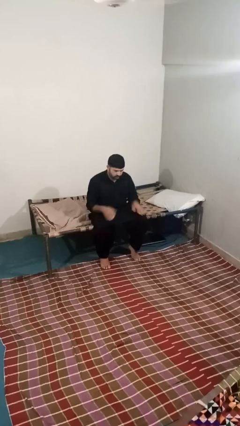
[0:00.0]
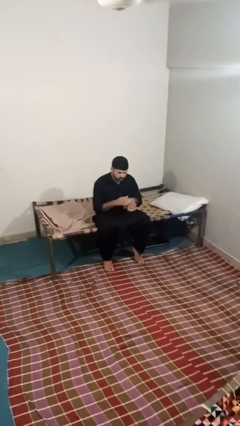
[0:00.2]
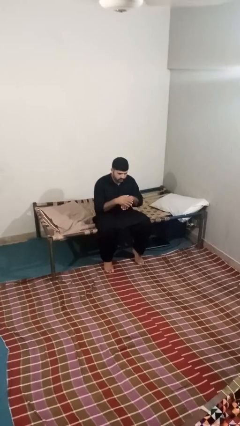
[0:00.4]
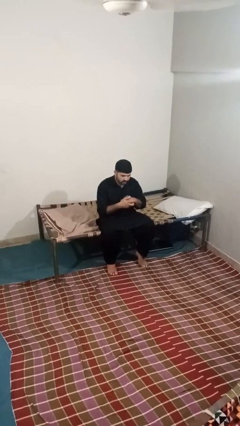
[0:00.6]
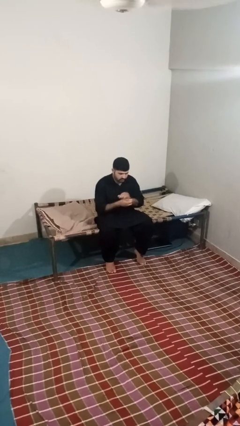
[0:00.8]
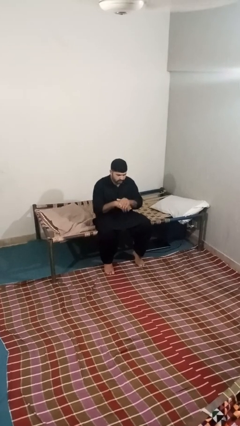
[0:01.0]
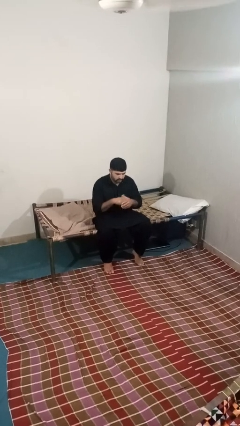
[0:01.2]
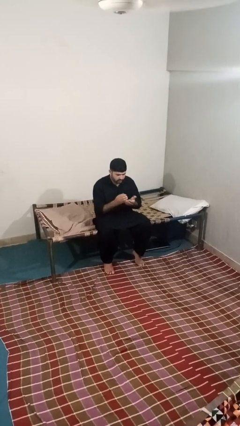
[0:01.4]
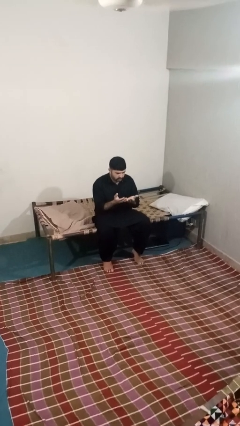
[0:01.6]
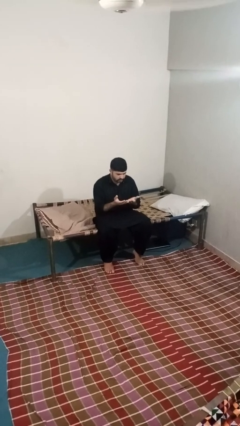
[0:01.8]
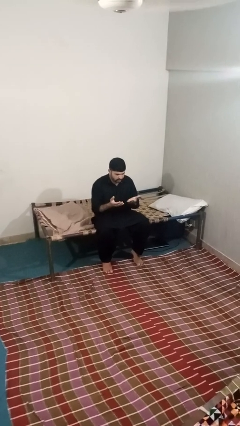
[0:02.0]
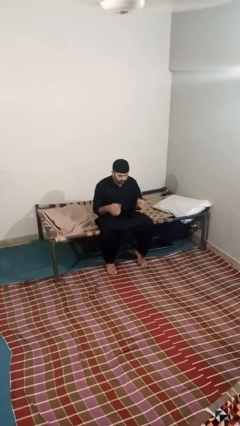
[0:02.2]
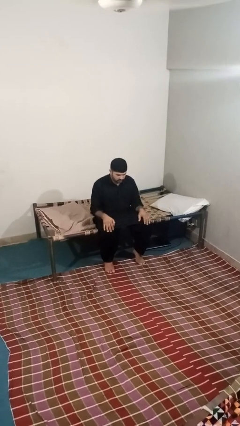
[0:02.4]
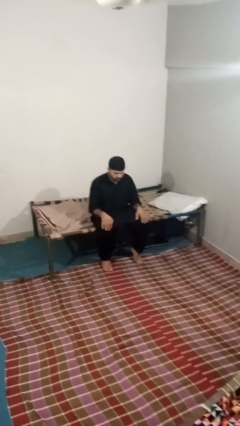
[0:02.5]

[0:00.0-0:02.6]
person looks at hands in lap

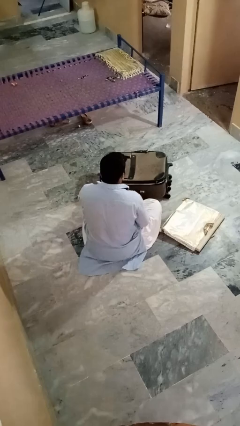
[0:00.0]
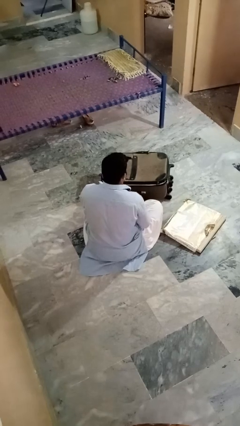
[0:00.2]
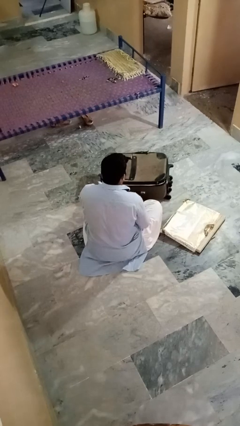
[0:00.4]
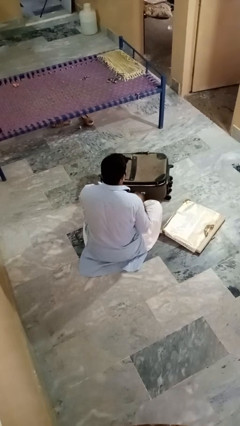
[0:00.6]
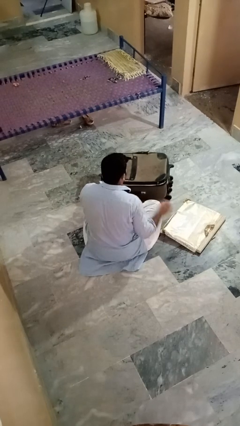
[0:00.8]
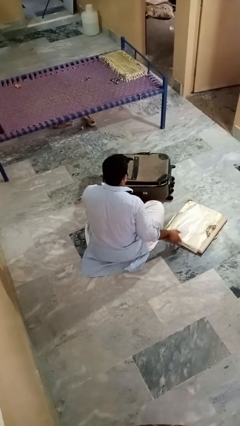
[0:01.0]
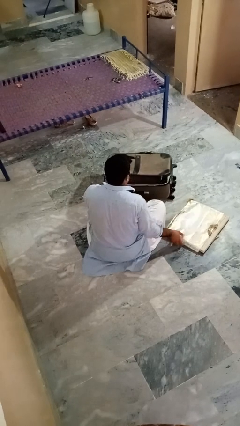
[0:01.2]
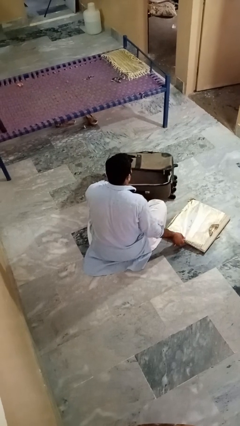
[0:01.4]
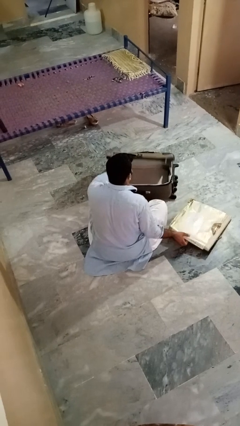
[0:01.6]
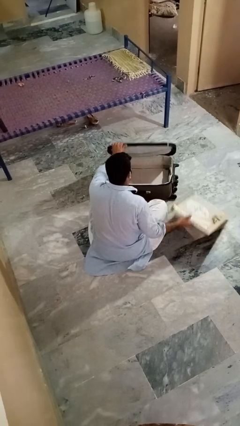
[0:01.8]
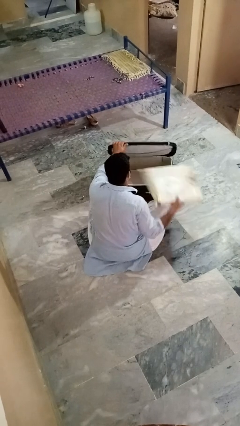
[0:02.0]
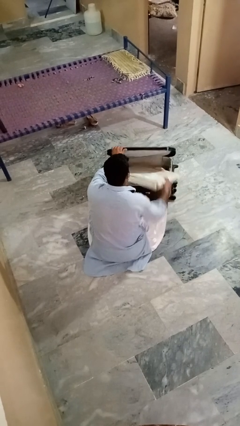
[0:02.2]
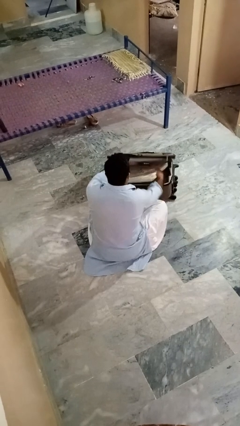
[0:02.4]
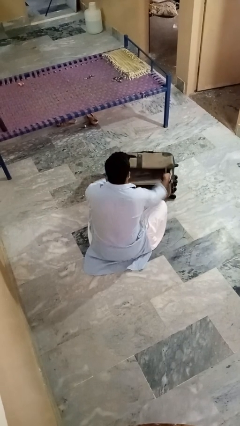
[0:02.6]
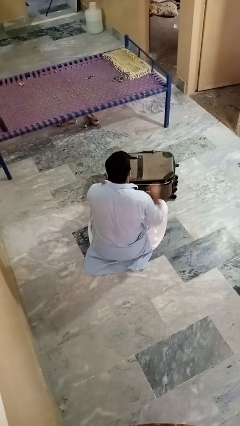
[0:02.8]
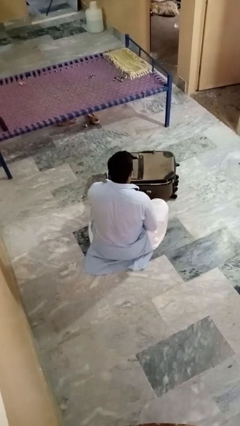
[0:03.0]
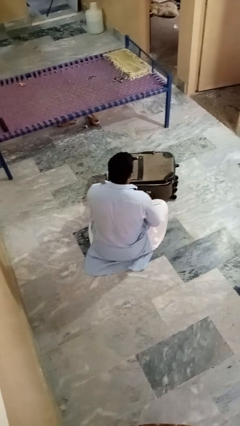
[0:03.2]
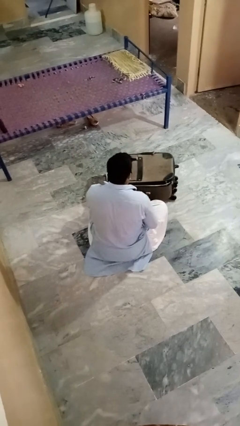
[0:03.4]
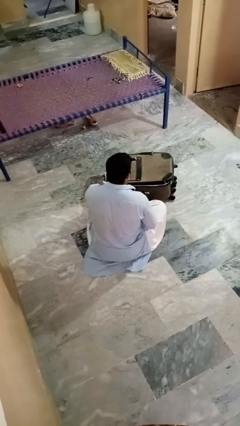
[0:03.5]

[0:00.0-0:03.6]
person puts object into bag

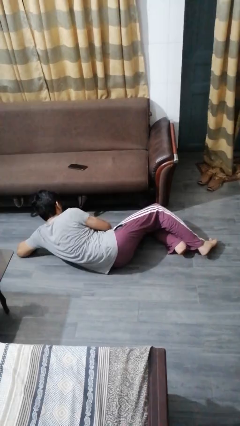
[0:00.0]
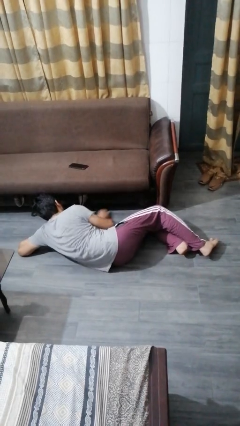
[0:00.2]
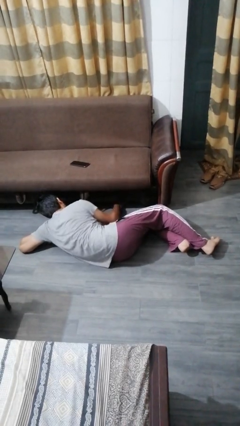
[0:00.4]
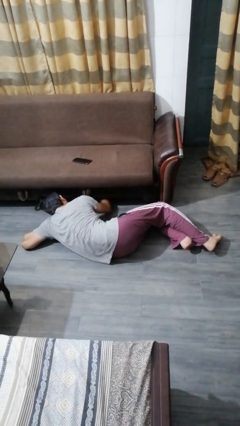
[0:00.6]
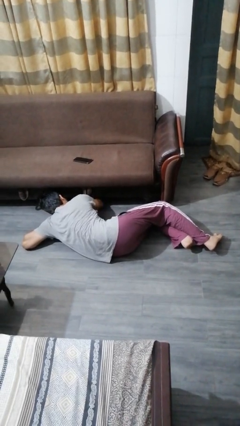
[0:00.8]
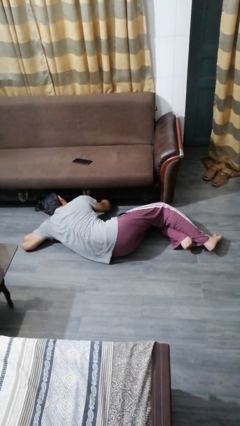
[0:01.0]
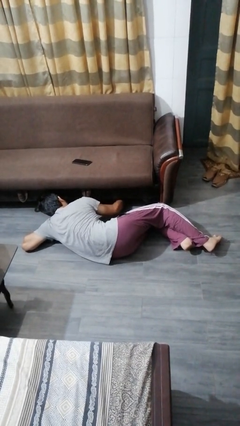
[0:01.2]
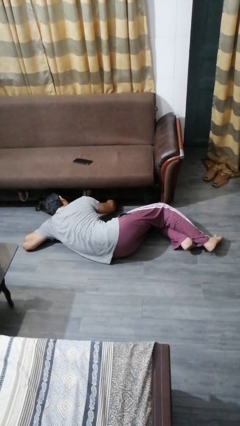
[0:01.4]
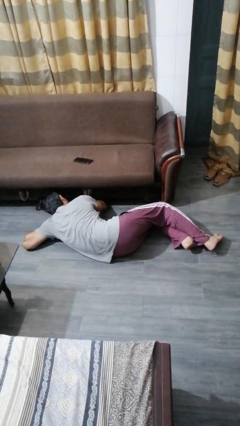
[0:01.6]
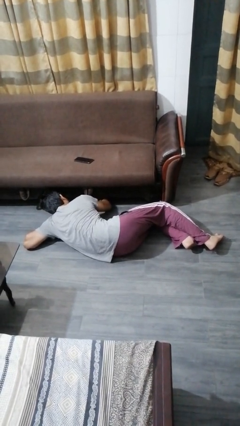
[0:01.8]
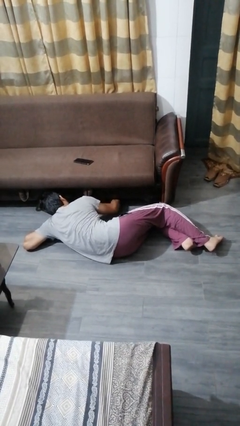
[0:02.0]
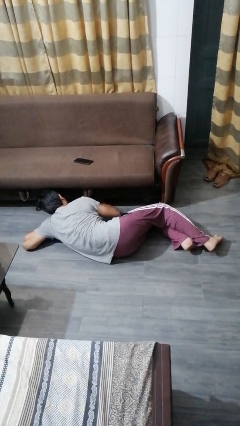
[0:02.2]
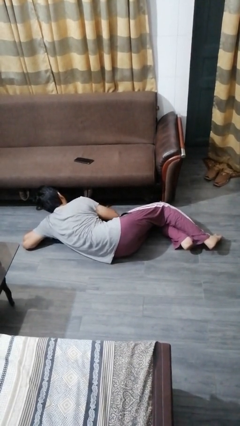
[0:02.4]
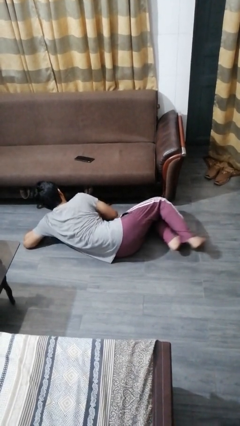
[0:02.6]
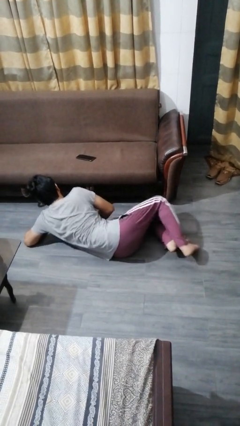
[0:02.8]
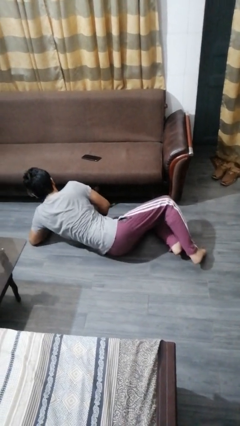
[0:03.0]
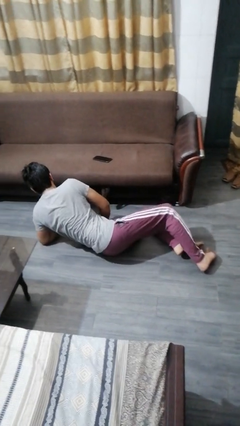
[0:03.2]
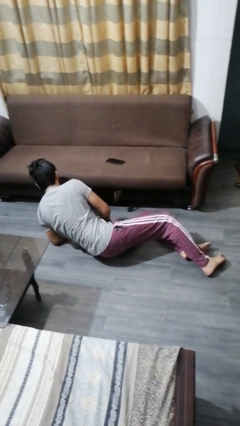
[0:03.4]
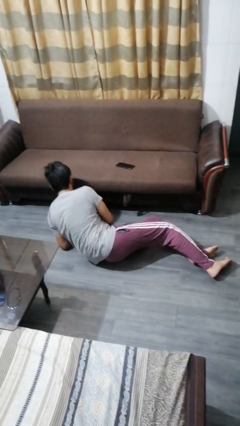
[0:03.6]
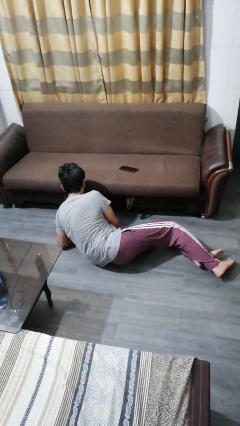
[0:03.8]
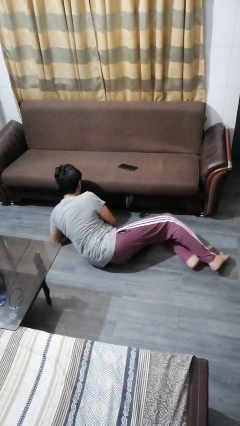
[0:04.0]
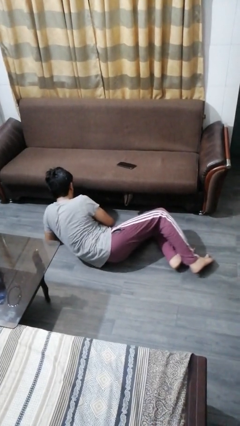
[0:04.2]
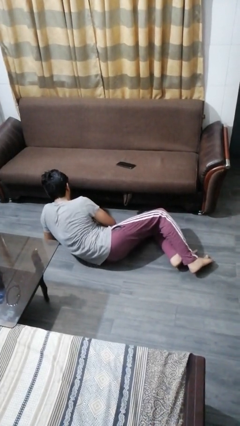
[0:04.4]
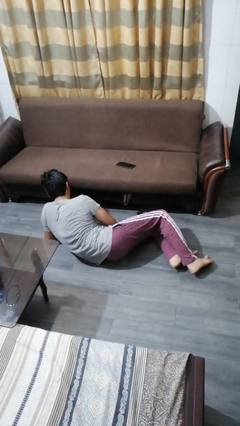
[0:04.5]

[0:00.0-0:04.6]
person searches under couch

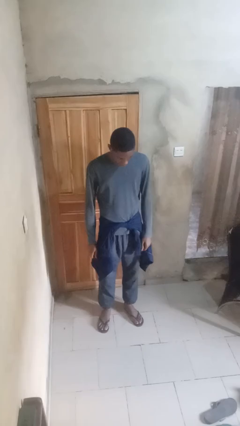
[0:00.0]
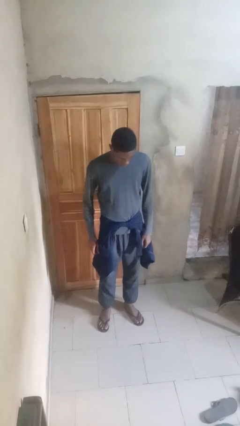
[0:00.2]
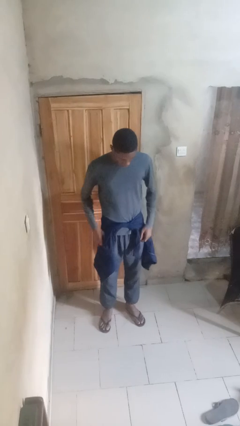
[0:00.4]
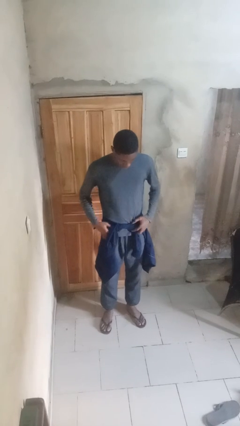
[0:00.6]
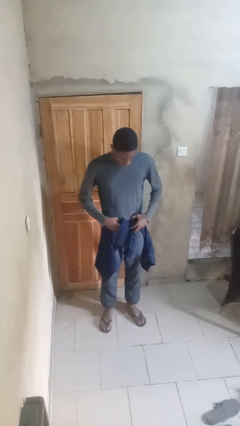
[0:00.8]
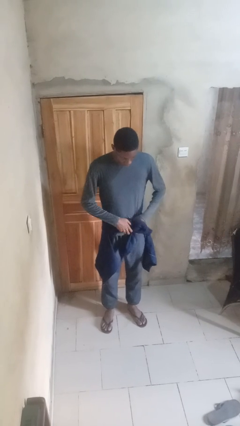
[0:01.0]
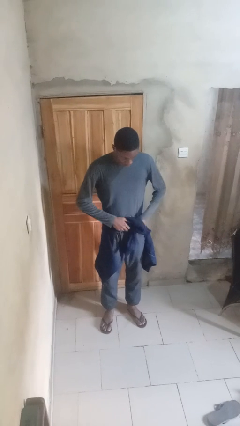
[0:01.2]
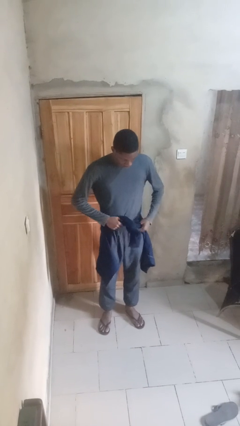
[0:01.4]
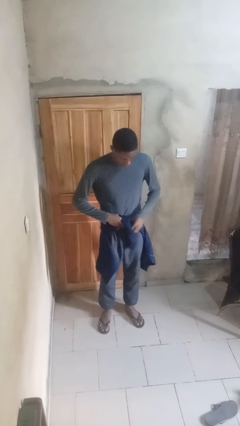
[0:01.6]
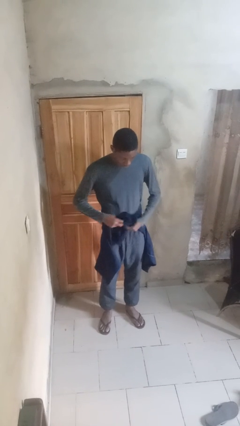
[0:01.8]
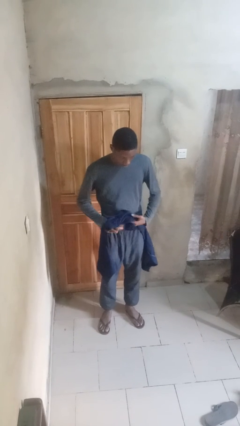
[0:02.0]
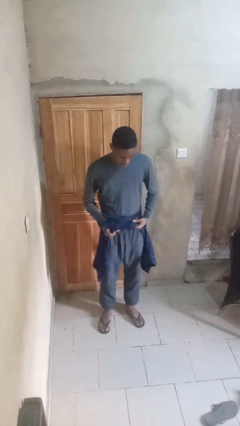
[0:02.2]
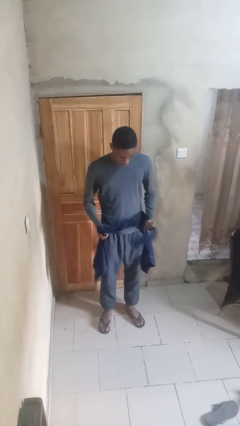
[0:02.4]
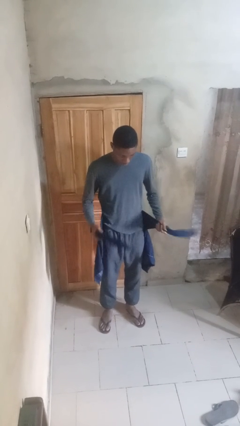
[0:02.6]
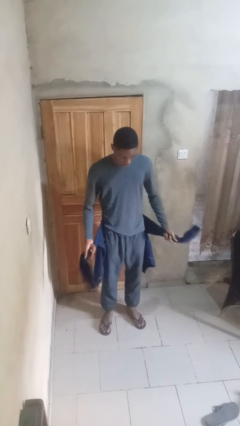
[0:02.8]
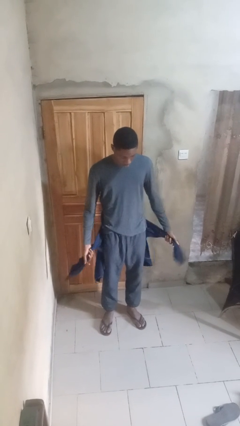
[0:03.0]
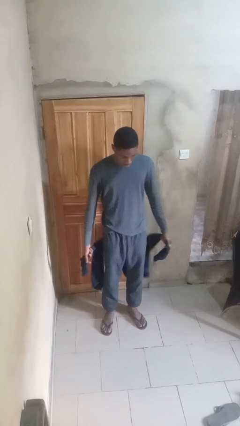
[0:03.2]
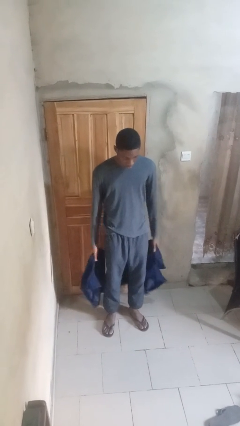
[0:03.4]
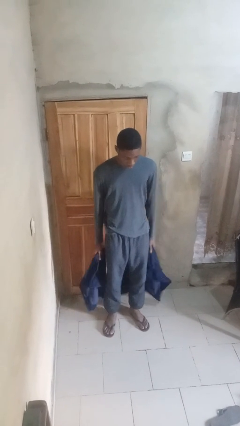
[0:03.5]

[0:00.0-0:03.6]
person unties jacket around waist

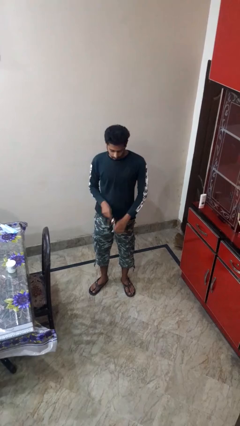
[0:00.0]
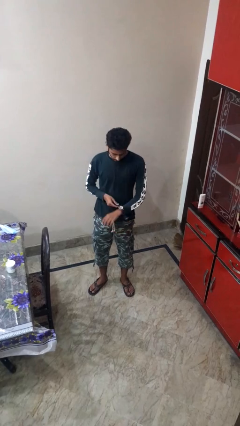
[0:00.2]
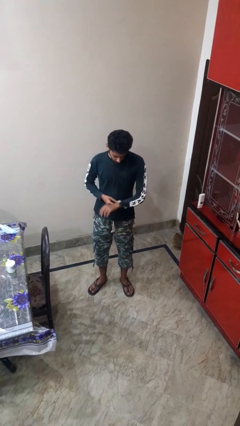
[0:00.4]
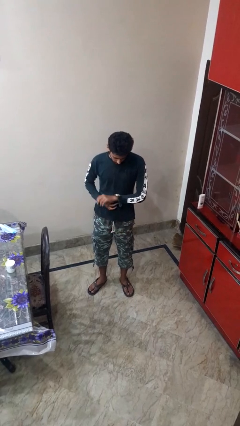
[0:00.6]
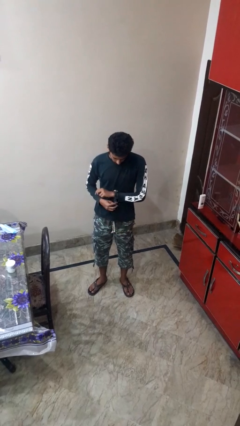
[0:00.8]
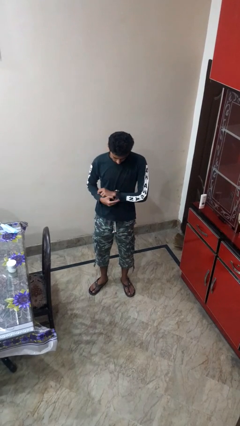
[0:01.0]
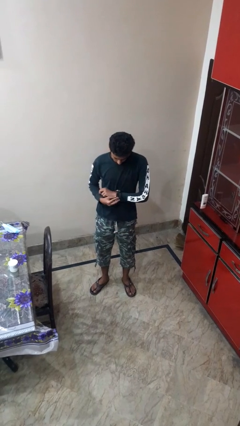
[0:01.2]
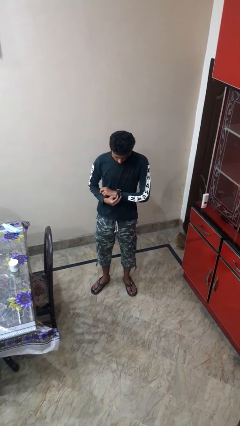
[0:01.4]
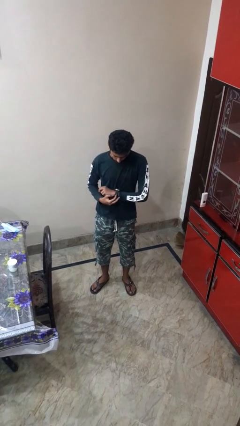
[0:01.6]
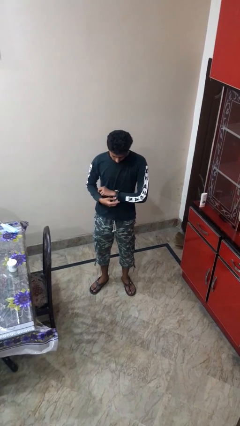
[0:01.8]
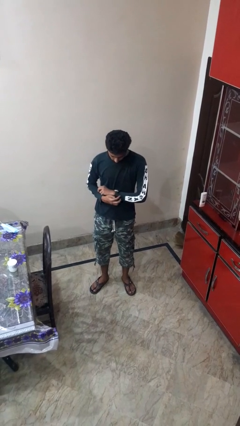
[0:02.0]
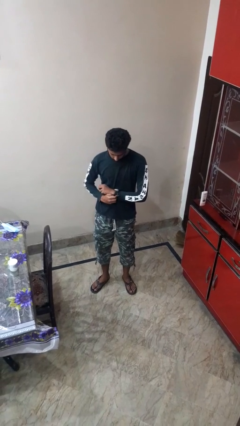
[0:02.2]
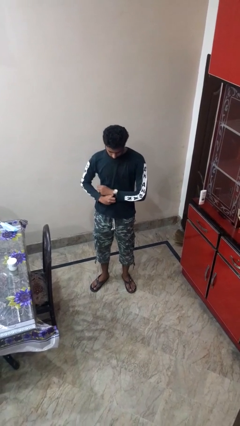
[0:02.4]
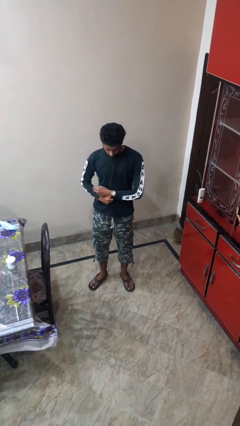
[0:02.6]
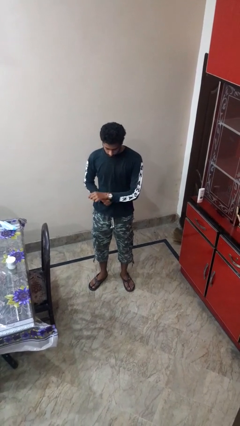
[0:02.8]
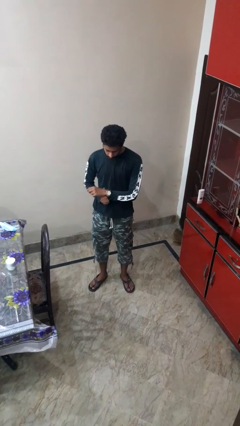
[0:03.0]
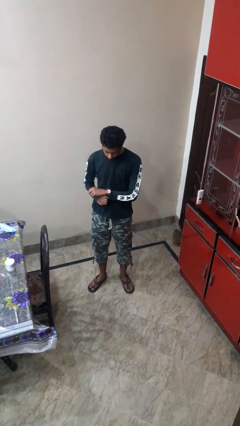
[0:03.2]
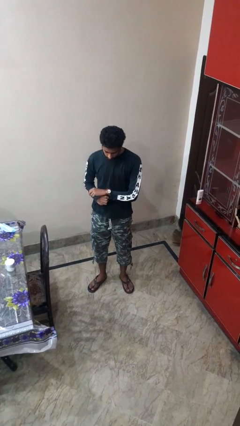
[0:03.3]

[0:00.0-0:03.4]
person puts on wristwatch
